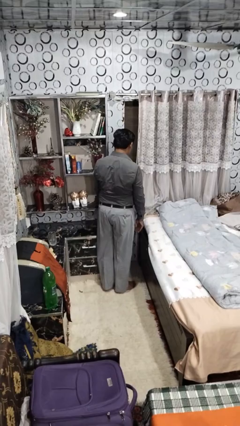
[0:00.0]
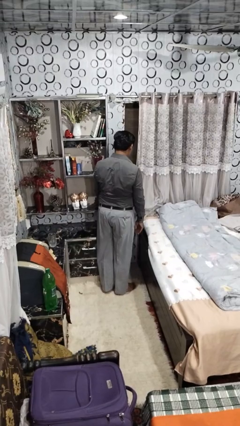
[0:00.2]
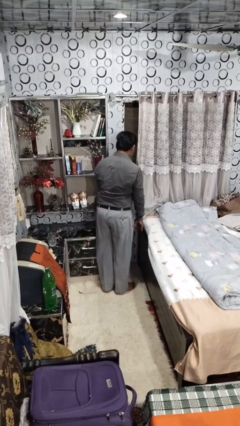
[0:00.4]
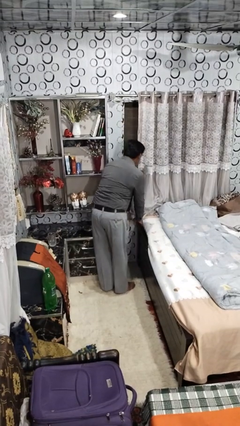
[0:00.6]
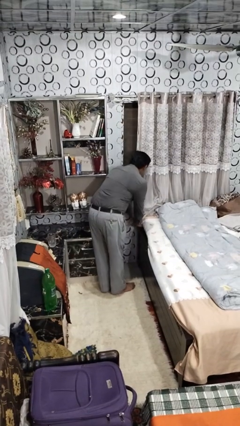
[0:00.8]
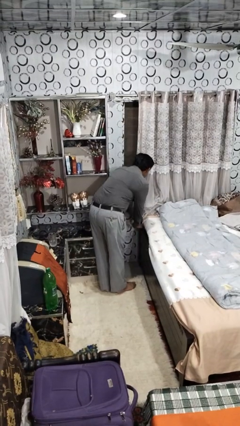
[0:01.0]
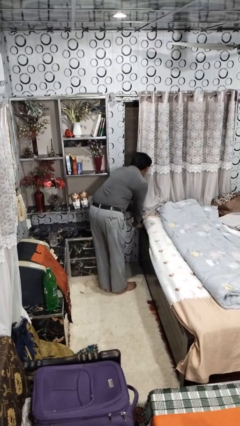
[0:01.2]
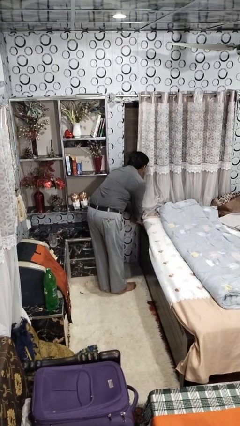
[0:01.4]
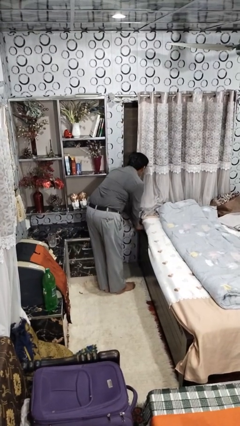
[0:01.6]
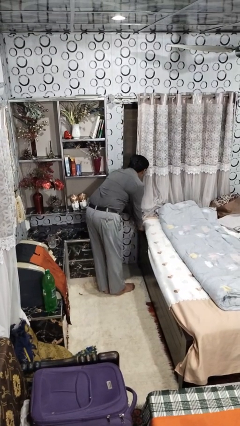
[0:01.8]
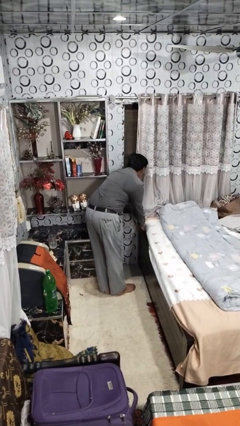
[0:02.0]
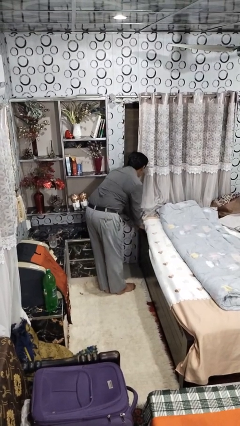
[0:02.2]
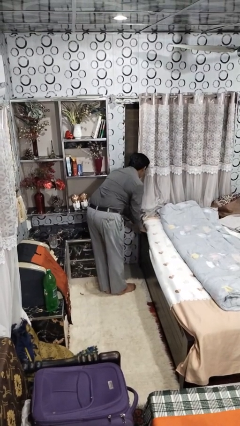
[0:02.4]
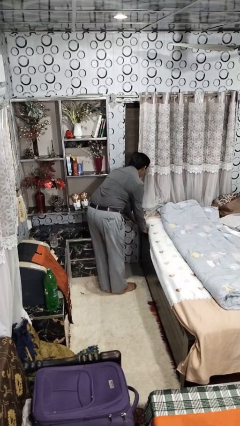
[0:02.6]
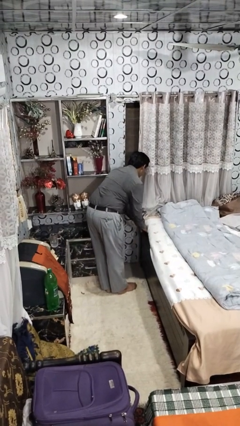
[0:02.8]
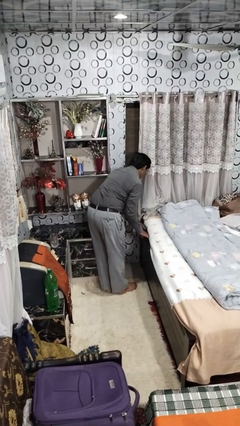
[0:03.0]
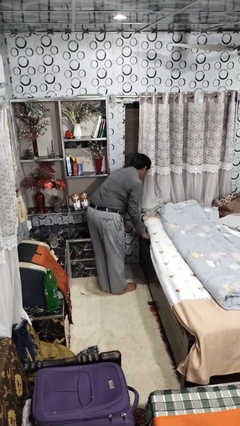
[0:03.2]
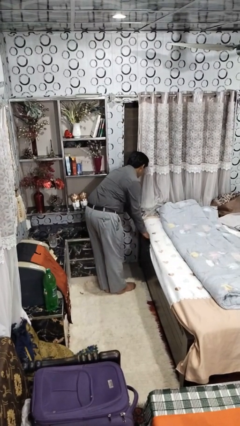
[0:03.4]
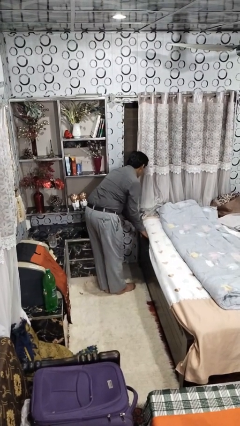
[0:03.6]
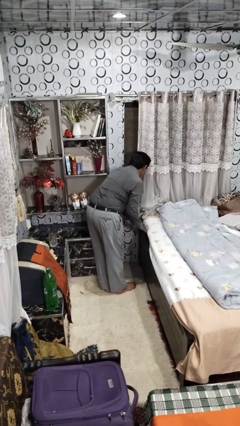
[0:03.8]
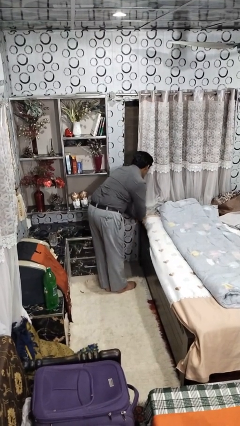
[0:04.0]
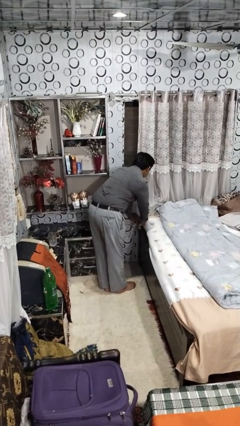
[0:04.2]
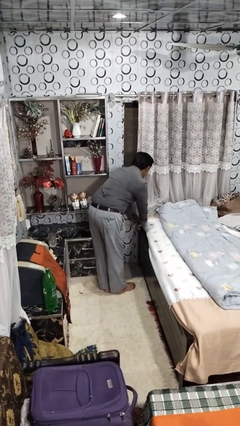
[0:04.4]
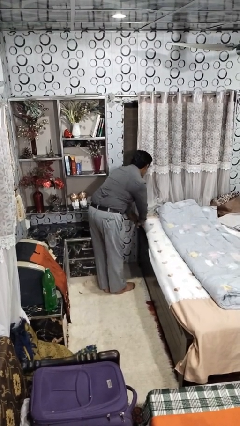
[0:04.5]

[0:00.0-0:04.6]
person makes bed

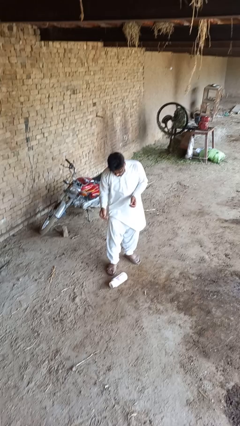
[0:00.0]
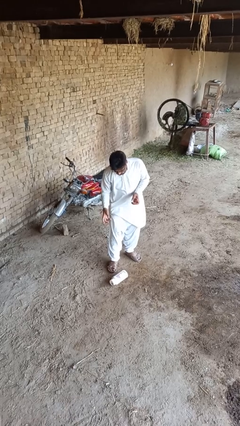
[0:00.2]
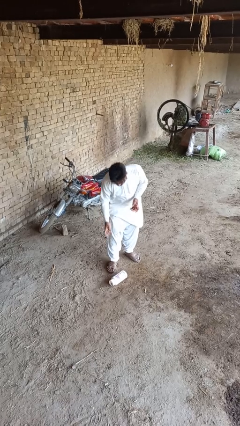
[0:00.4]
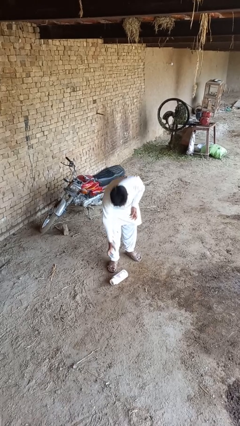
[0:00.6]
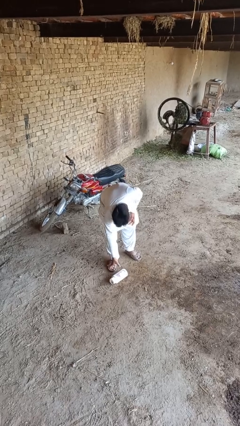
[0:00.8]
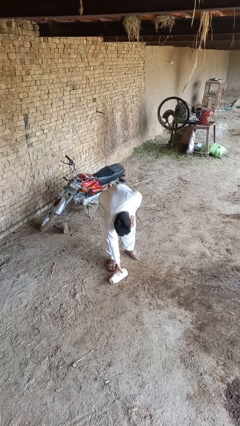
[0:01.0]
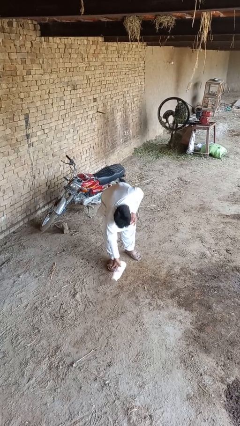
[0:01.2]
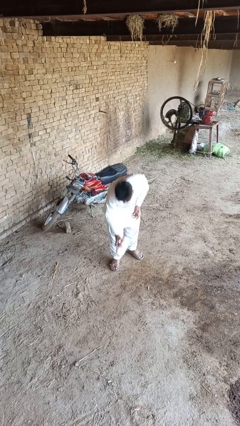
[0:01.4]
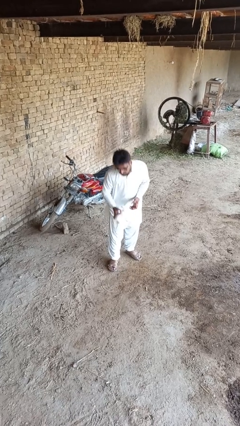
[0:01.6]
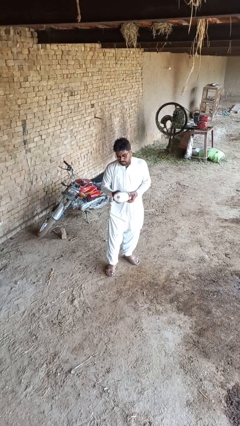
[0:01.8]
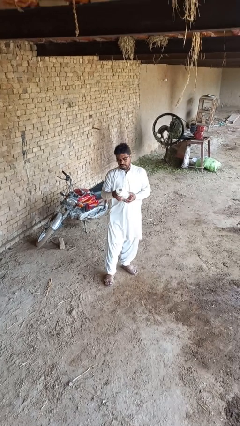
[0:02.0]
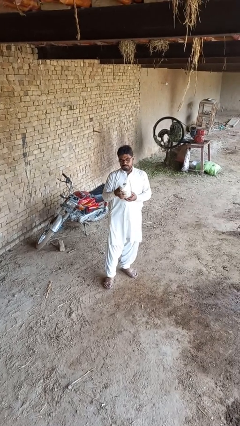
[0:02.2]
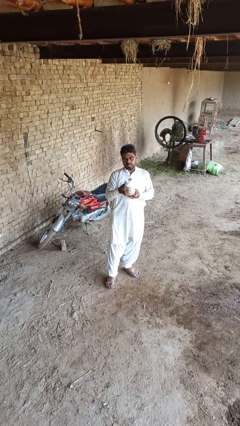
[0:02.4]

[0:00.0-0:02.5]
person picks up object from floor

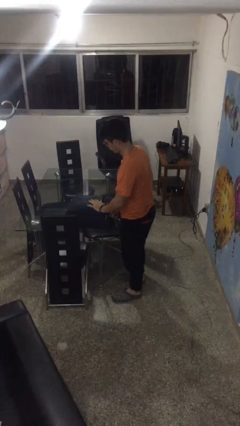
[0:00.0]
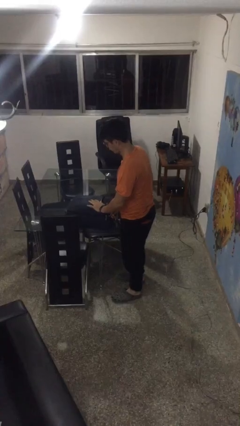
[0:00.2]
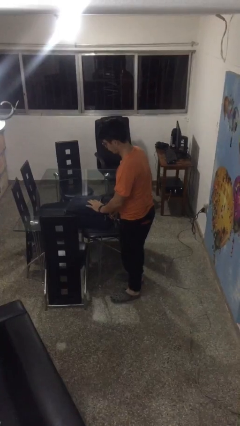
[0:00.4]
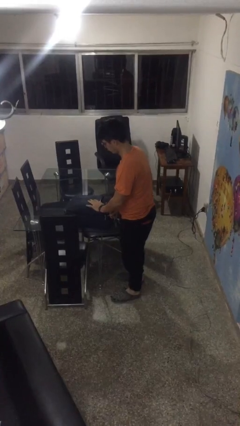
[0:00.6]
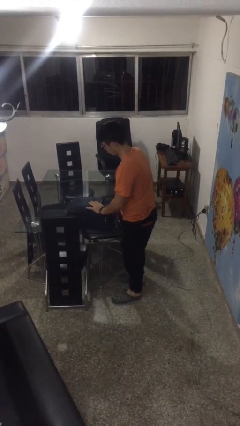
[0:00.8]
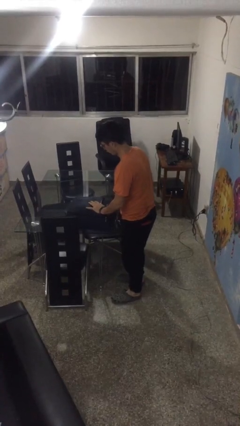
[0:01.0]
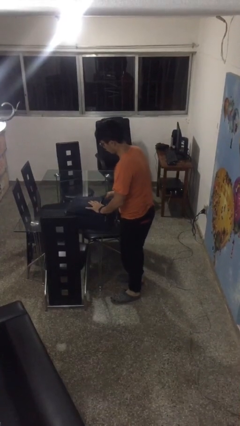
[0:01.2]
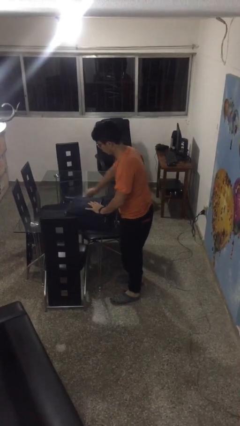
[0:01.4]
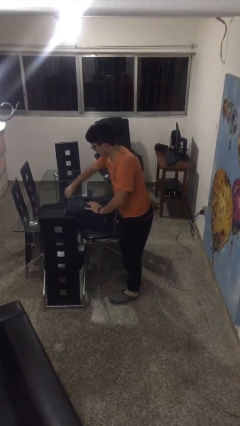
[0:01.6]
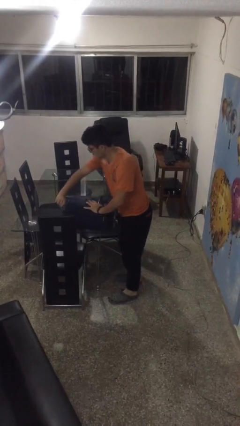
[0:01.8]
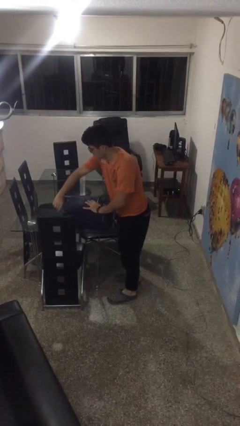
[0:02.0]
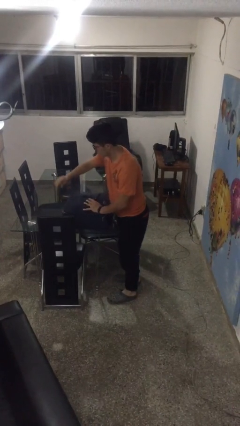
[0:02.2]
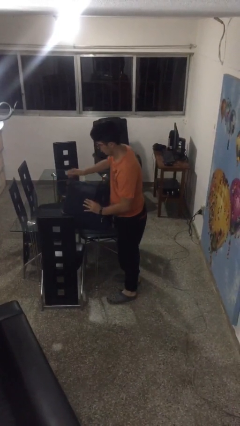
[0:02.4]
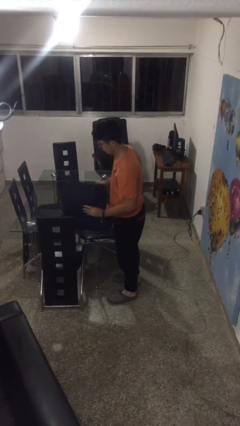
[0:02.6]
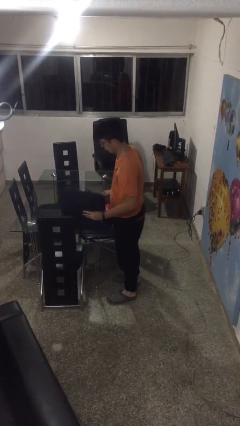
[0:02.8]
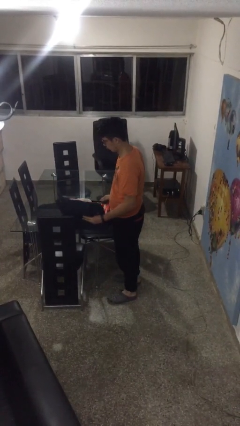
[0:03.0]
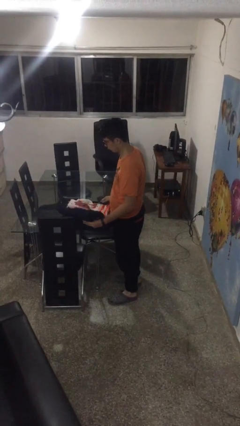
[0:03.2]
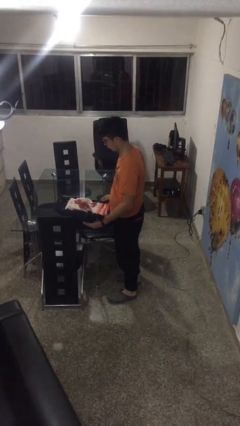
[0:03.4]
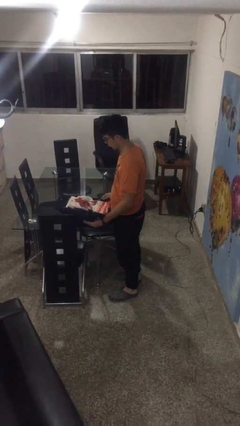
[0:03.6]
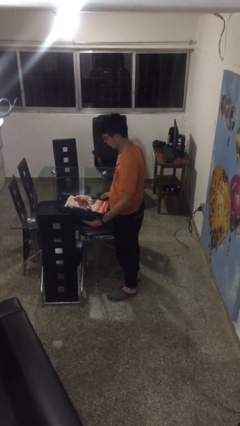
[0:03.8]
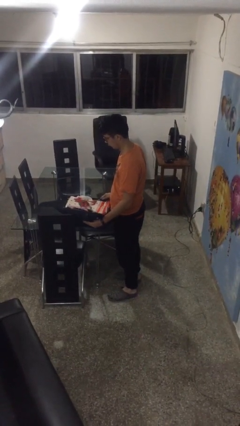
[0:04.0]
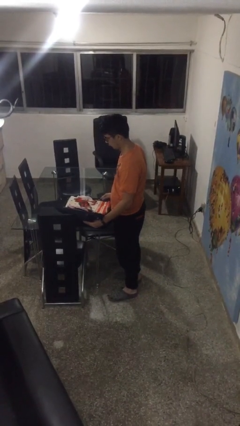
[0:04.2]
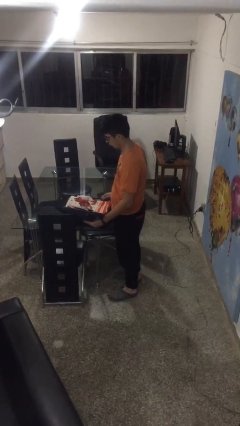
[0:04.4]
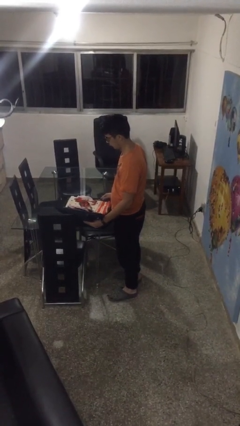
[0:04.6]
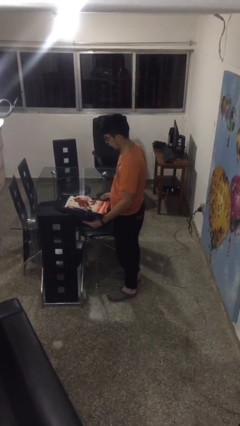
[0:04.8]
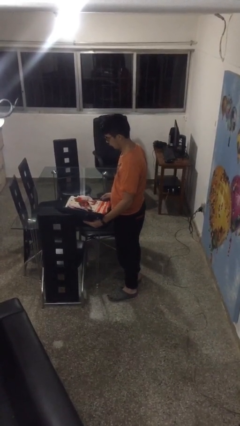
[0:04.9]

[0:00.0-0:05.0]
person opens suitcase

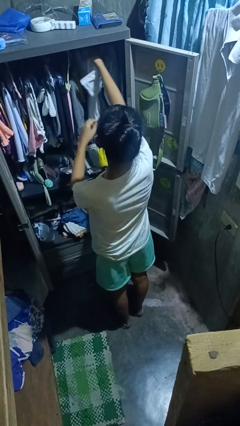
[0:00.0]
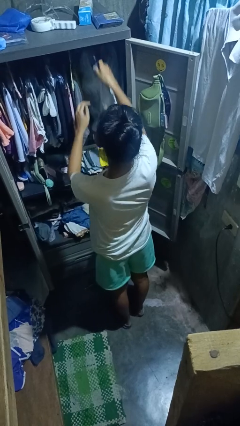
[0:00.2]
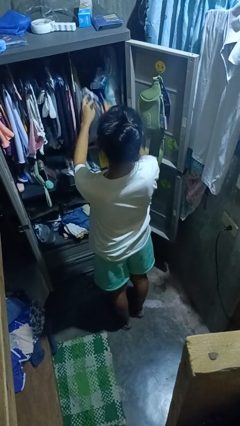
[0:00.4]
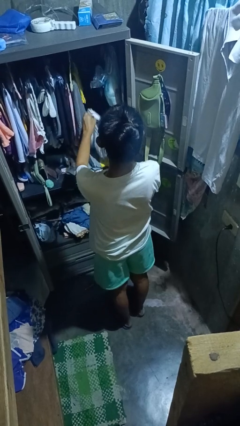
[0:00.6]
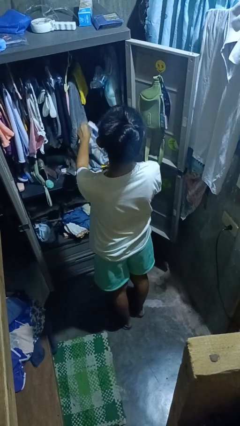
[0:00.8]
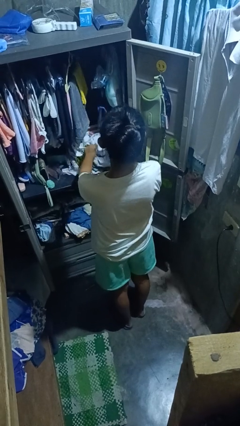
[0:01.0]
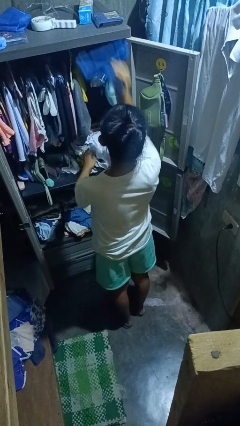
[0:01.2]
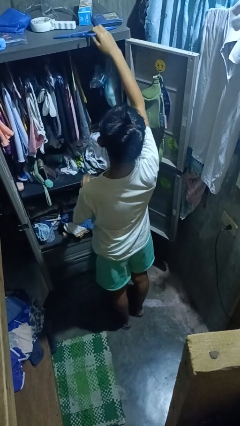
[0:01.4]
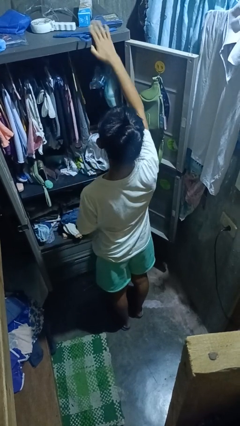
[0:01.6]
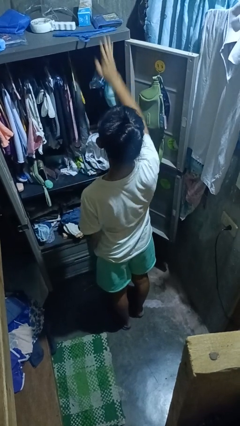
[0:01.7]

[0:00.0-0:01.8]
person takes clothes from closet

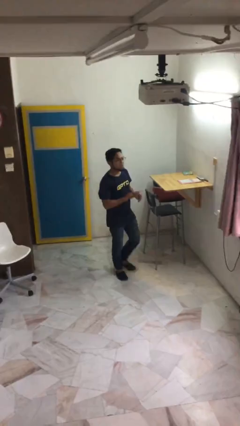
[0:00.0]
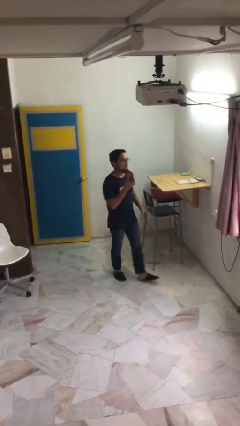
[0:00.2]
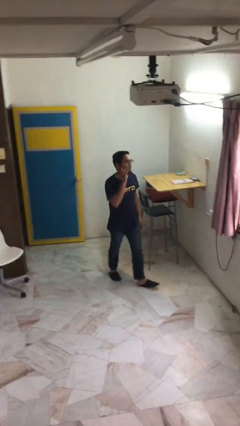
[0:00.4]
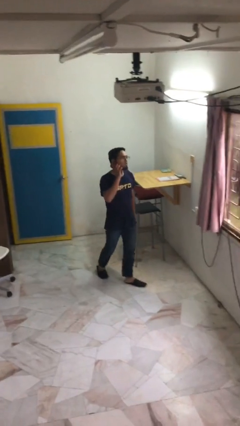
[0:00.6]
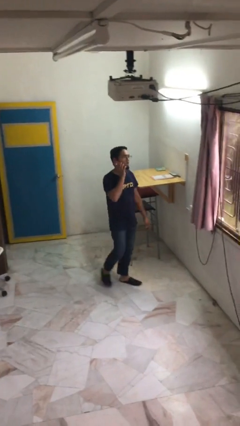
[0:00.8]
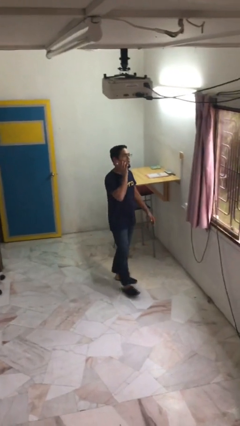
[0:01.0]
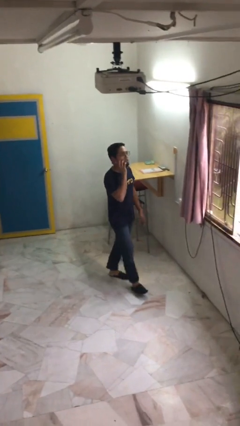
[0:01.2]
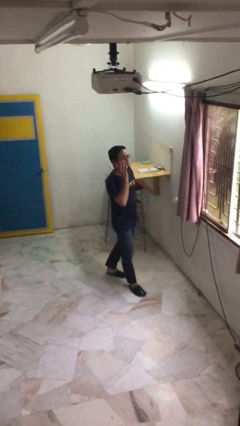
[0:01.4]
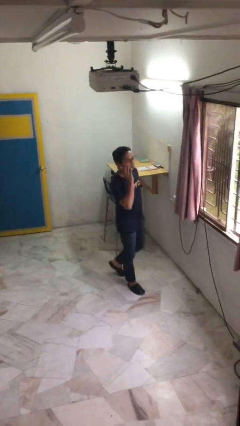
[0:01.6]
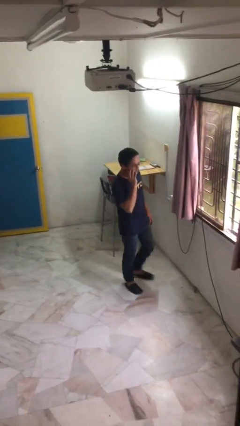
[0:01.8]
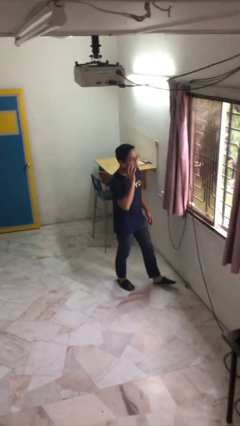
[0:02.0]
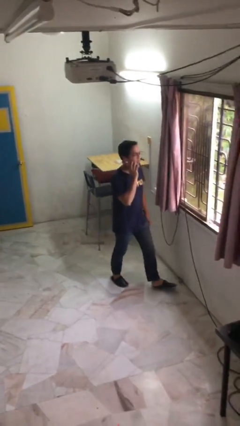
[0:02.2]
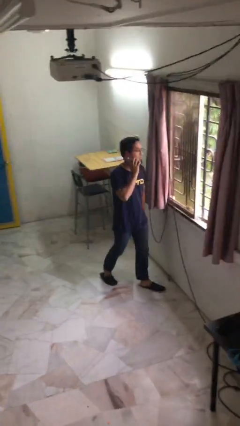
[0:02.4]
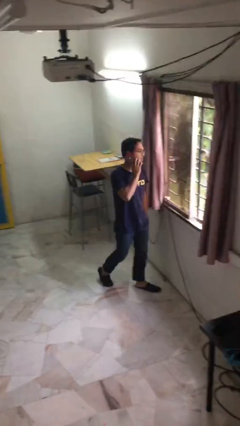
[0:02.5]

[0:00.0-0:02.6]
person talks on phone

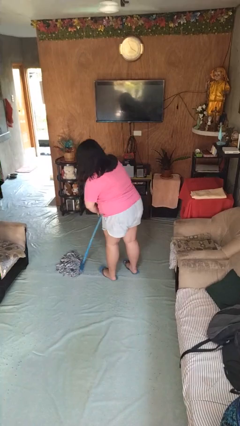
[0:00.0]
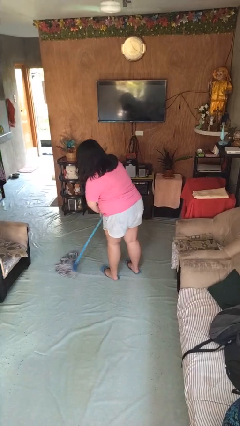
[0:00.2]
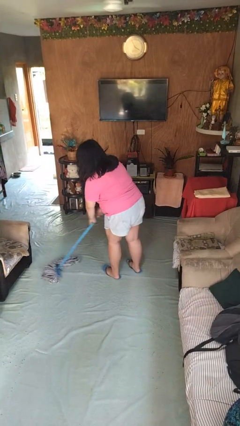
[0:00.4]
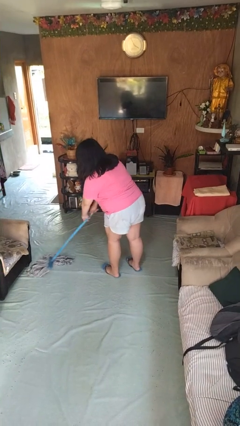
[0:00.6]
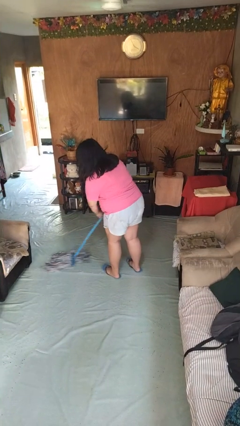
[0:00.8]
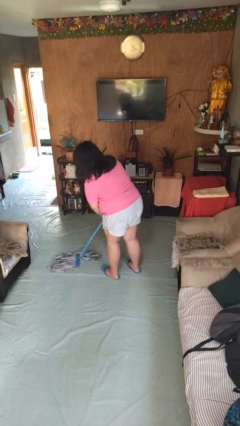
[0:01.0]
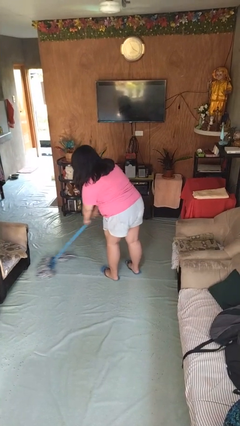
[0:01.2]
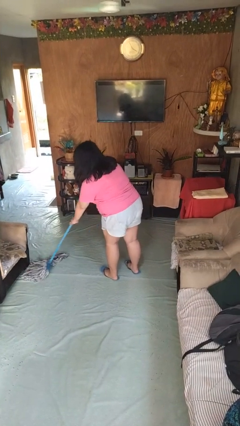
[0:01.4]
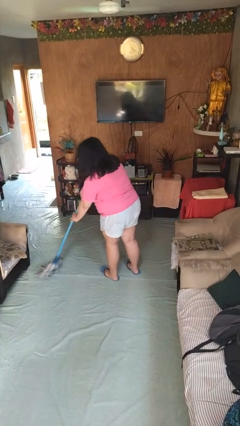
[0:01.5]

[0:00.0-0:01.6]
person mops
